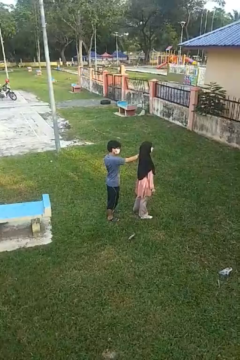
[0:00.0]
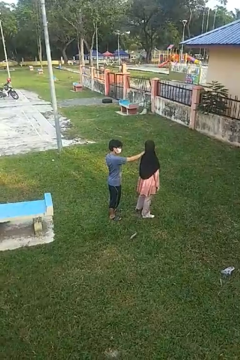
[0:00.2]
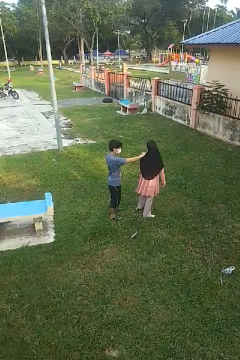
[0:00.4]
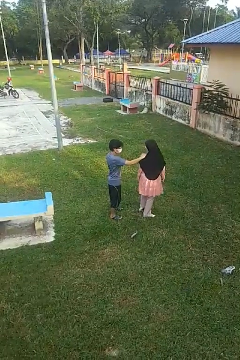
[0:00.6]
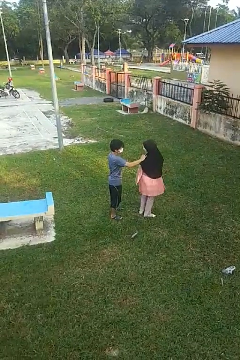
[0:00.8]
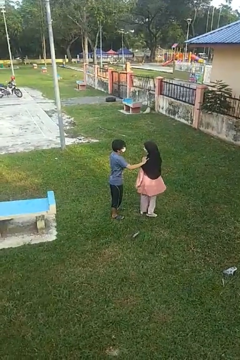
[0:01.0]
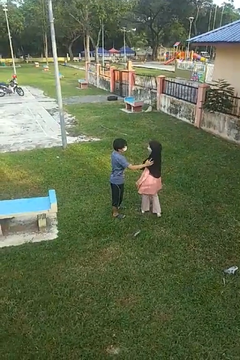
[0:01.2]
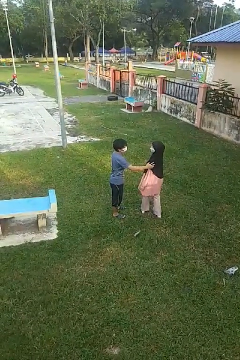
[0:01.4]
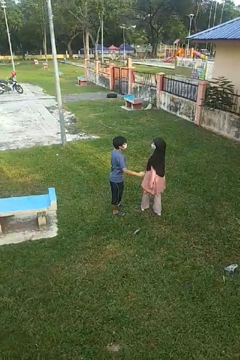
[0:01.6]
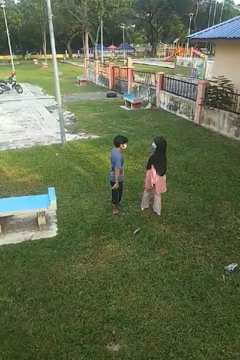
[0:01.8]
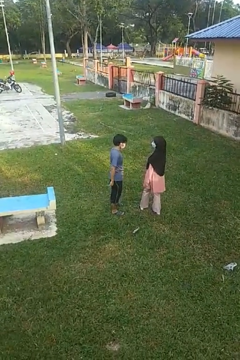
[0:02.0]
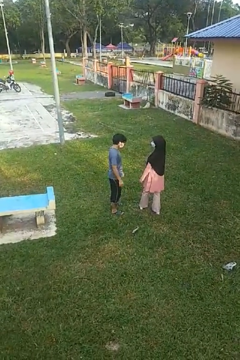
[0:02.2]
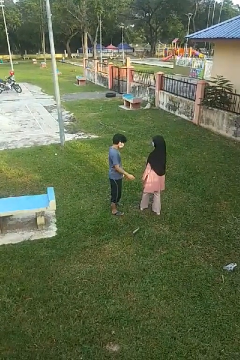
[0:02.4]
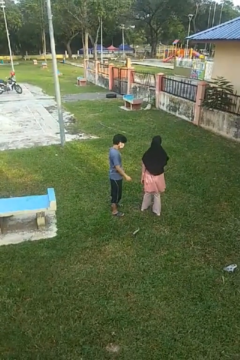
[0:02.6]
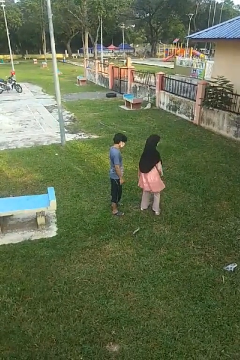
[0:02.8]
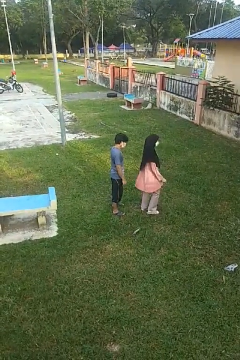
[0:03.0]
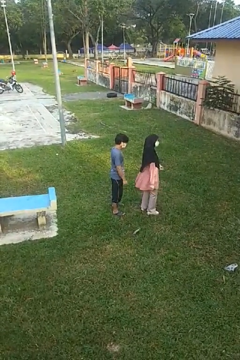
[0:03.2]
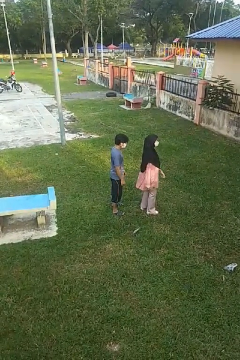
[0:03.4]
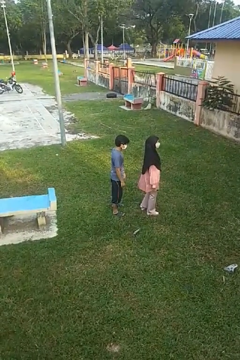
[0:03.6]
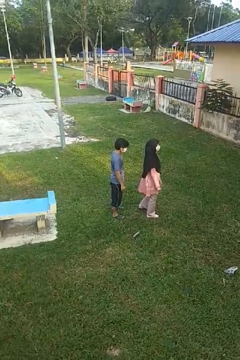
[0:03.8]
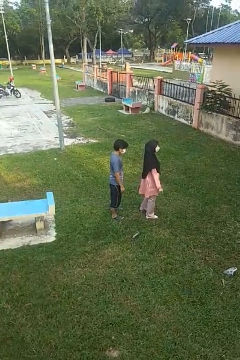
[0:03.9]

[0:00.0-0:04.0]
person spins person around

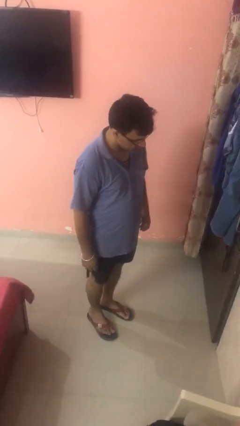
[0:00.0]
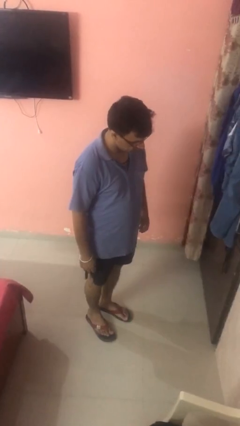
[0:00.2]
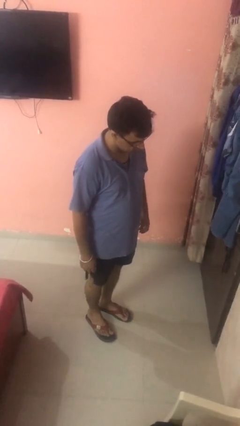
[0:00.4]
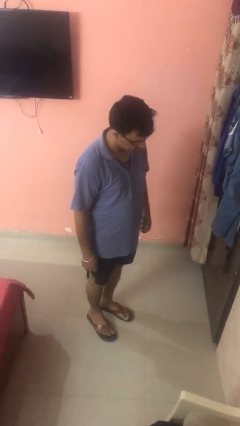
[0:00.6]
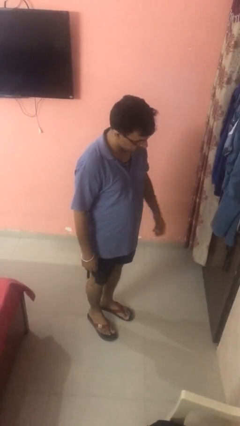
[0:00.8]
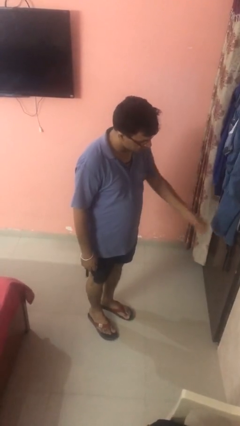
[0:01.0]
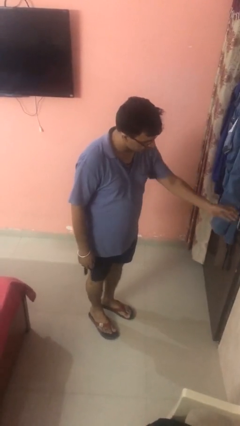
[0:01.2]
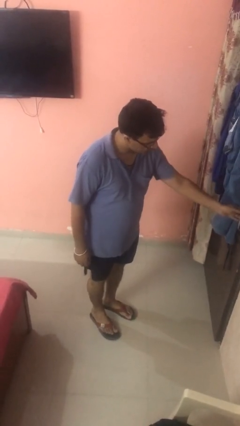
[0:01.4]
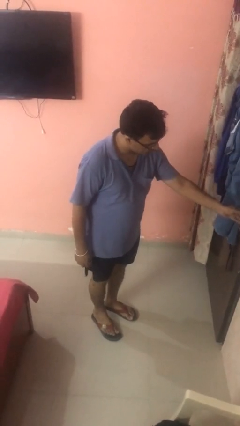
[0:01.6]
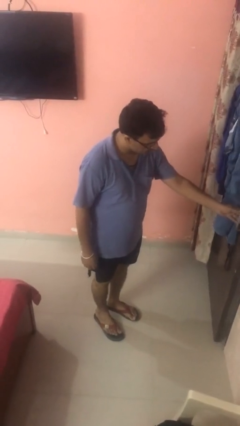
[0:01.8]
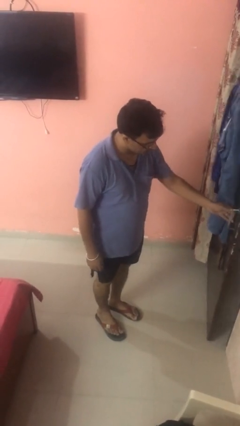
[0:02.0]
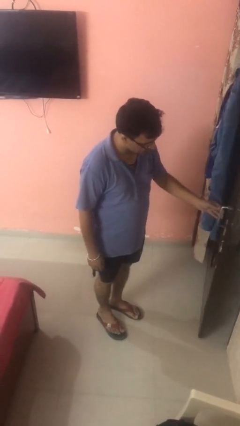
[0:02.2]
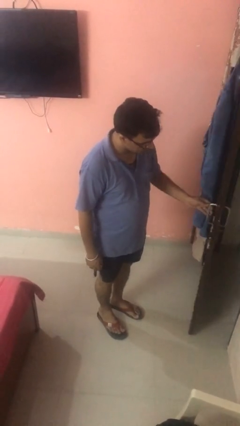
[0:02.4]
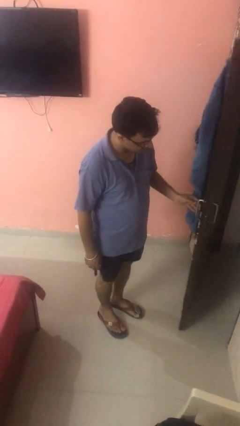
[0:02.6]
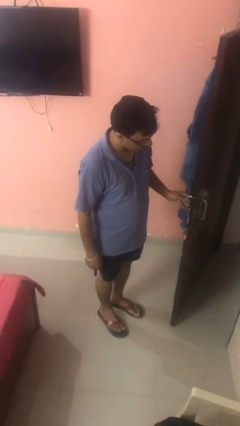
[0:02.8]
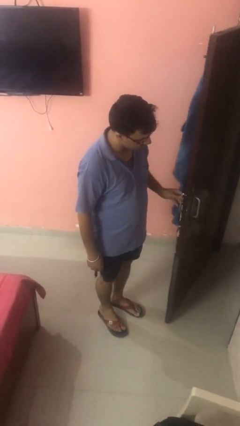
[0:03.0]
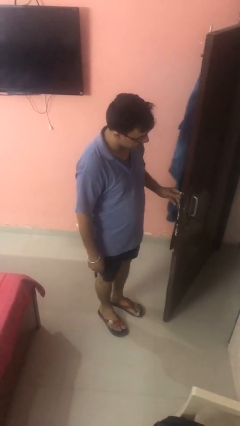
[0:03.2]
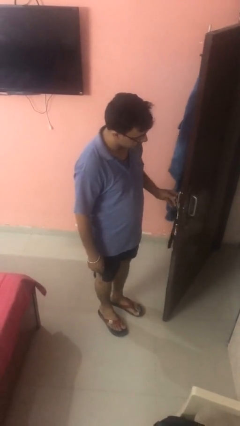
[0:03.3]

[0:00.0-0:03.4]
person opens facility door

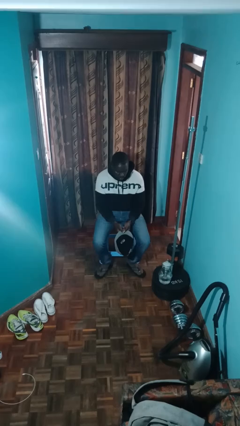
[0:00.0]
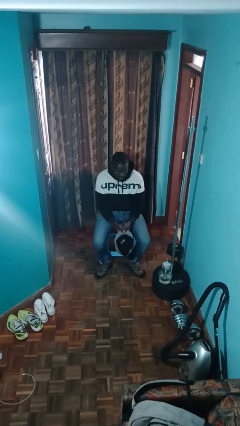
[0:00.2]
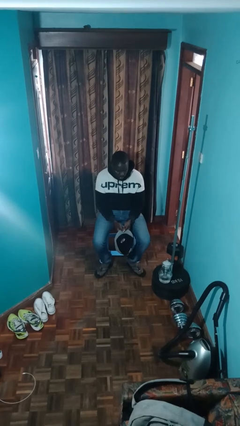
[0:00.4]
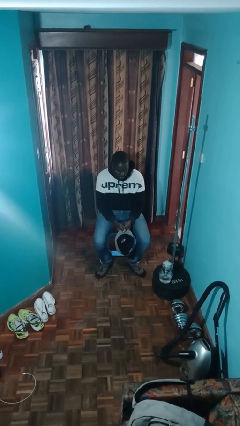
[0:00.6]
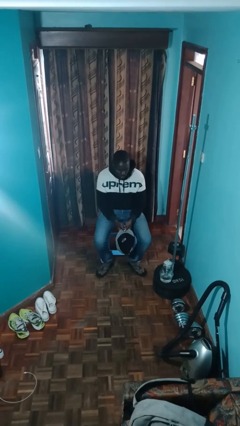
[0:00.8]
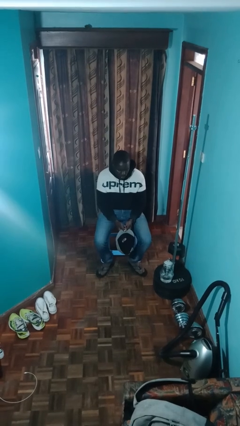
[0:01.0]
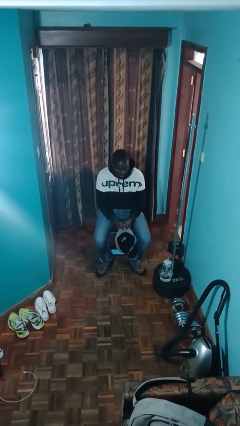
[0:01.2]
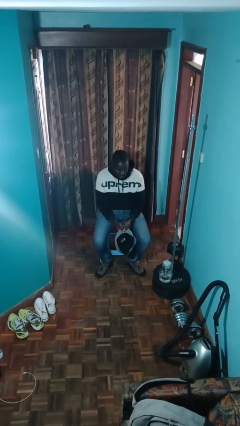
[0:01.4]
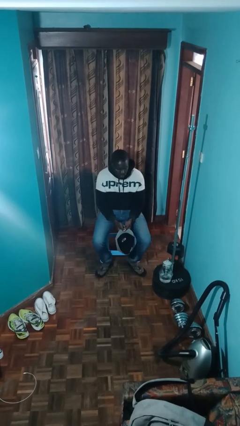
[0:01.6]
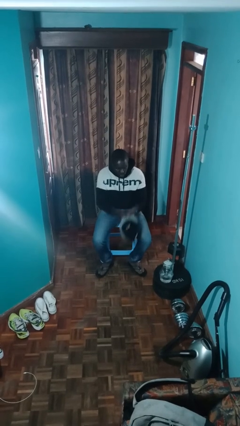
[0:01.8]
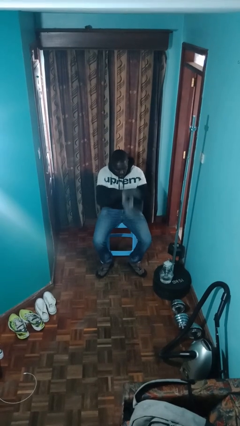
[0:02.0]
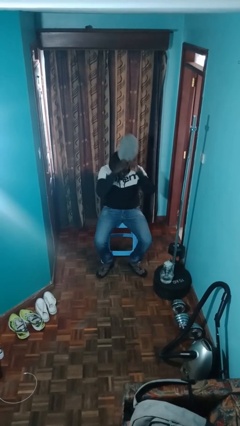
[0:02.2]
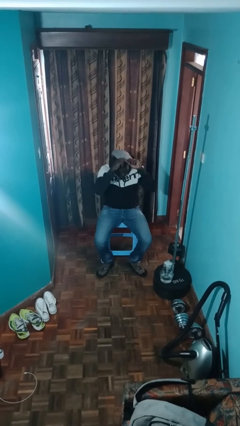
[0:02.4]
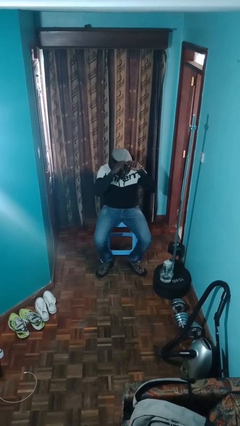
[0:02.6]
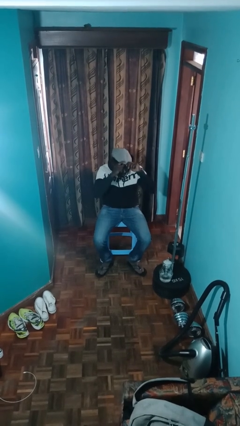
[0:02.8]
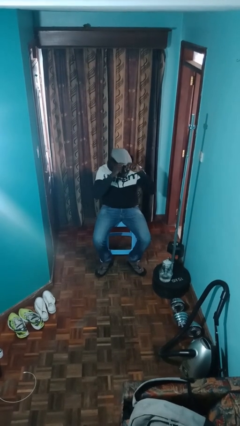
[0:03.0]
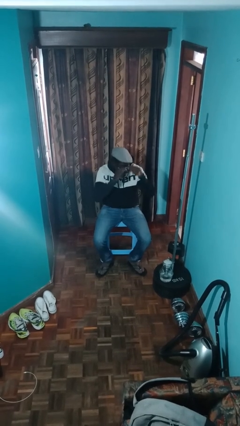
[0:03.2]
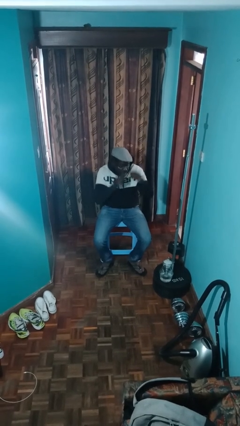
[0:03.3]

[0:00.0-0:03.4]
person puts on hat

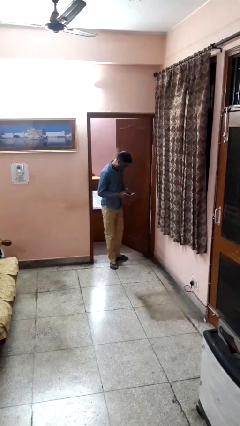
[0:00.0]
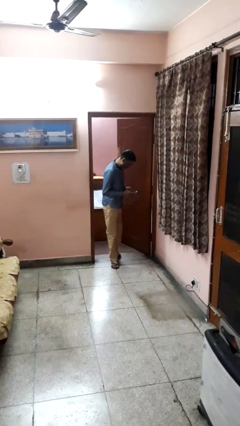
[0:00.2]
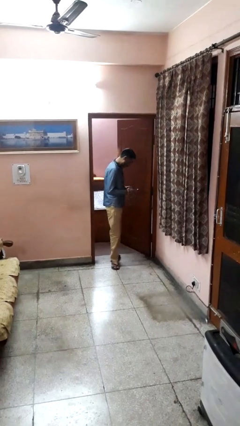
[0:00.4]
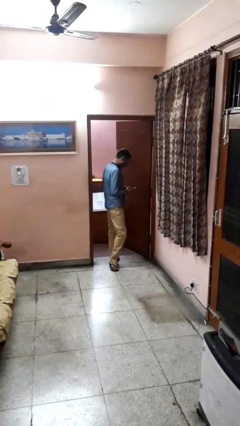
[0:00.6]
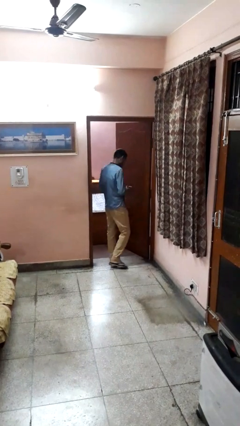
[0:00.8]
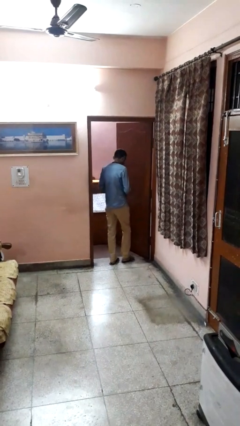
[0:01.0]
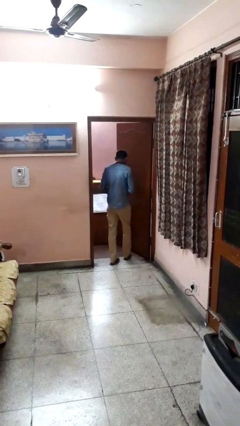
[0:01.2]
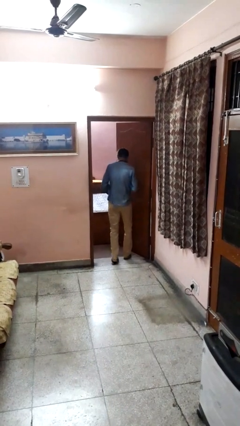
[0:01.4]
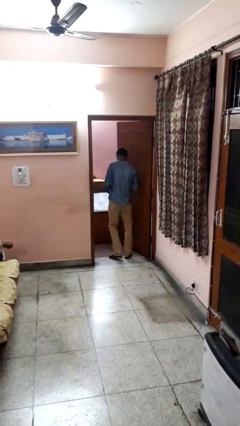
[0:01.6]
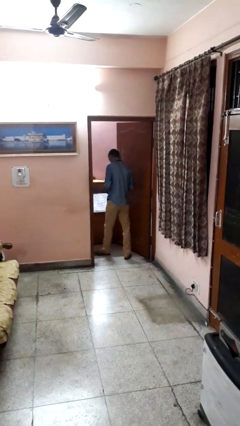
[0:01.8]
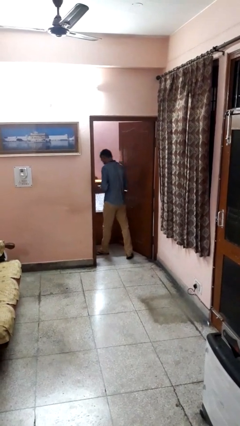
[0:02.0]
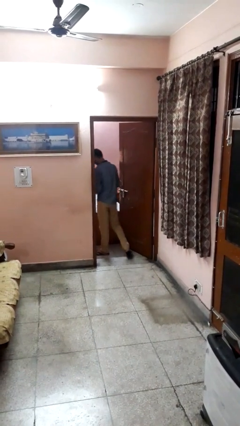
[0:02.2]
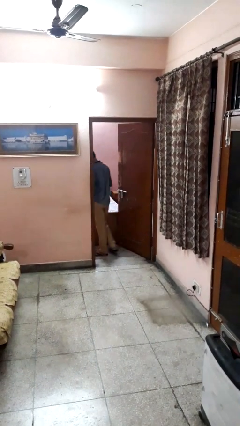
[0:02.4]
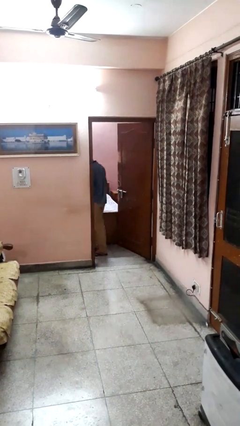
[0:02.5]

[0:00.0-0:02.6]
person exits scene through structure

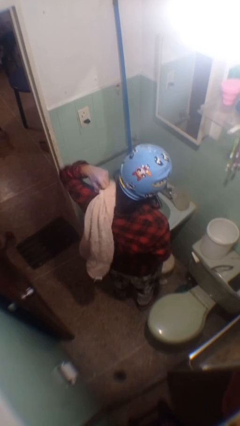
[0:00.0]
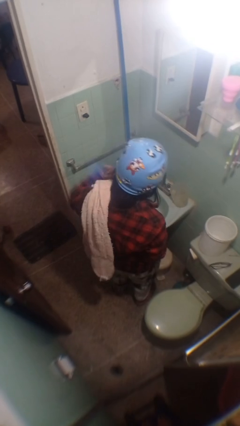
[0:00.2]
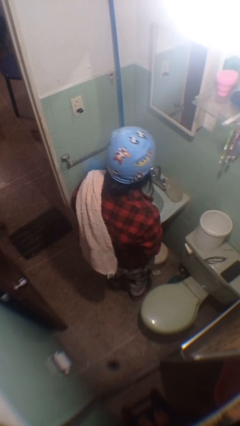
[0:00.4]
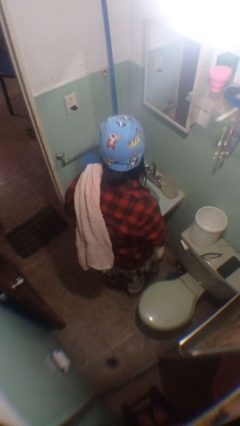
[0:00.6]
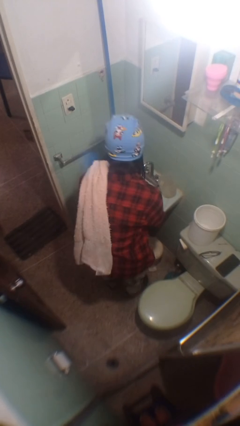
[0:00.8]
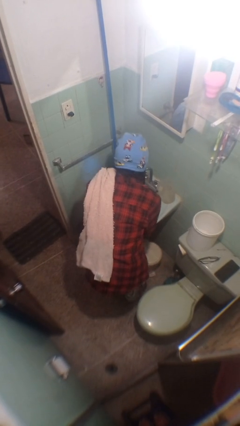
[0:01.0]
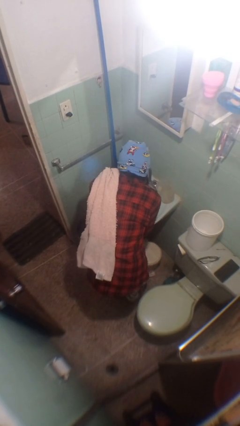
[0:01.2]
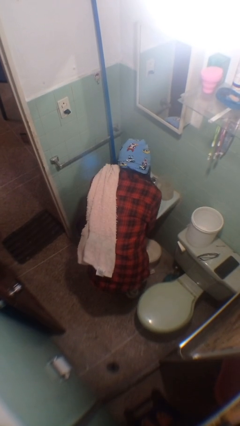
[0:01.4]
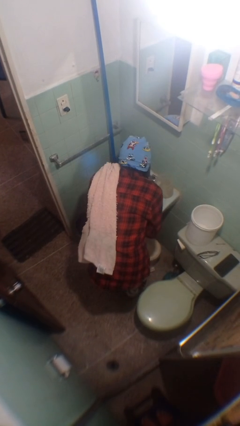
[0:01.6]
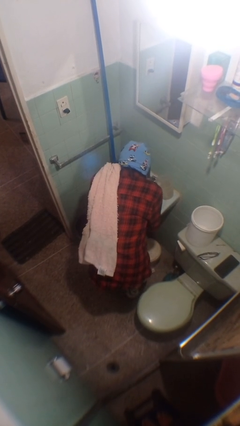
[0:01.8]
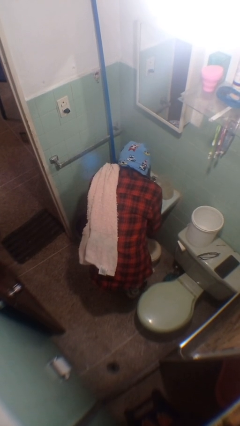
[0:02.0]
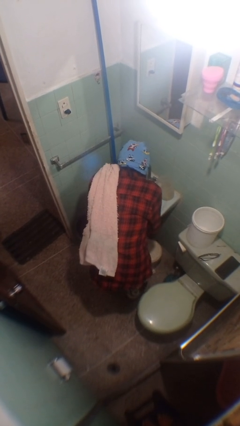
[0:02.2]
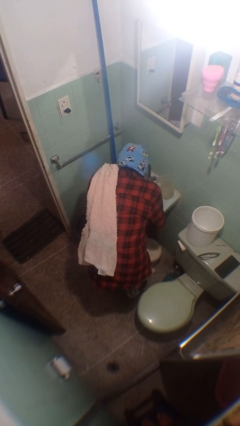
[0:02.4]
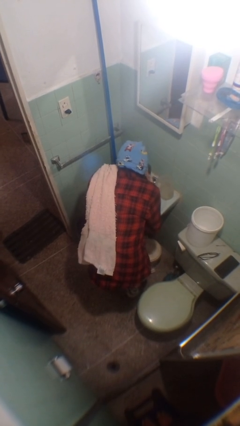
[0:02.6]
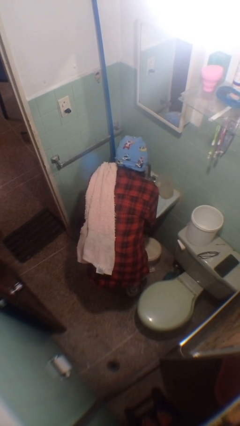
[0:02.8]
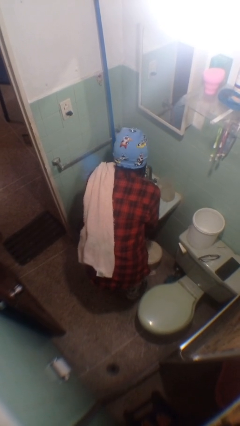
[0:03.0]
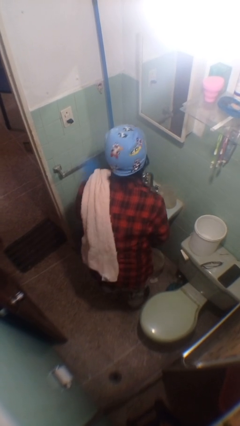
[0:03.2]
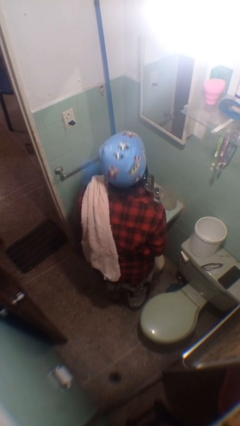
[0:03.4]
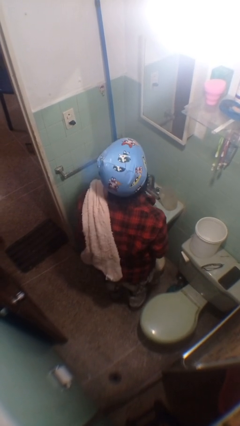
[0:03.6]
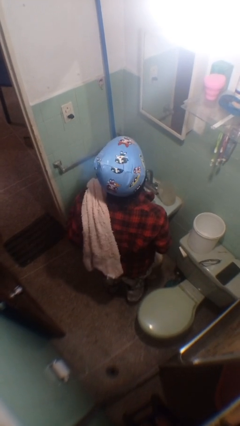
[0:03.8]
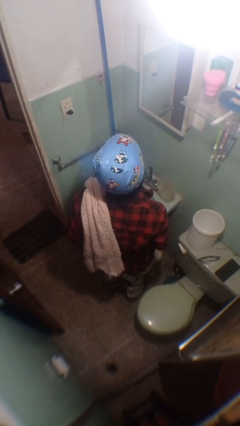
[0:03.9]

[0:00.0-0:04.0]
person washes face

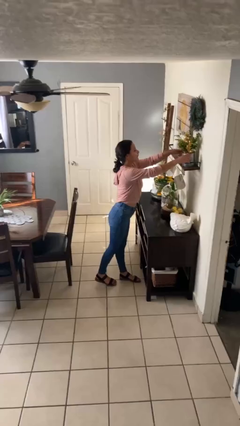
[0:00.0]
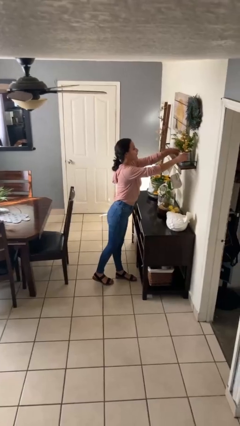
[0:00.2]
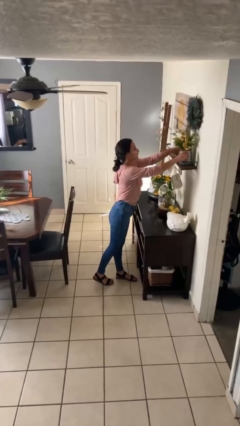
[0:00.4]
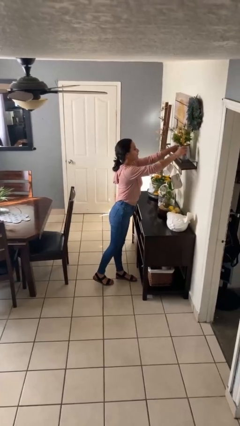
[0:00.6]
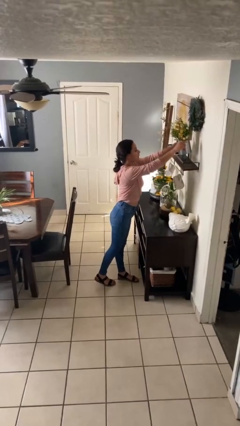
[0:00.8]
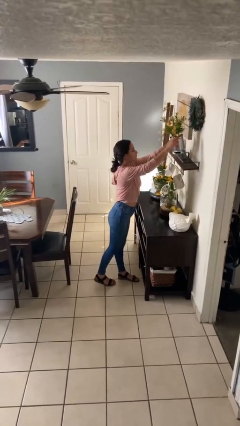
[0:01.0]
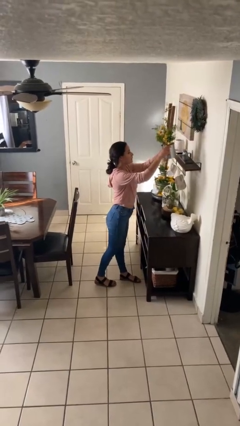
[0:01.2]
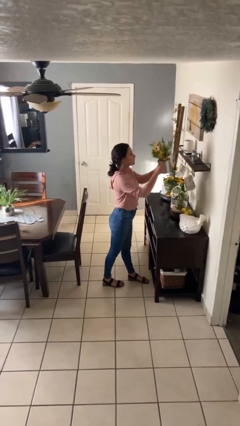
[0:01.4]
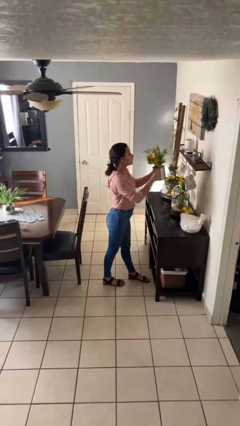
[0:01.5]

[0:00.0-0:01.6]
person picks up object from countertop
